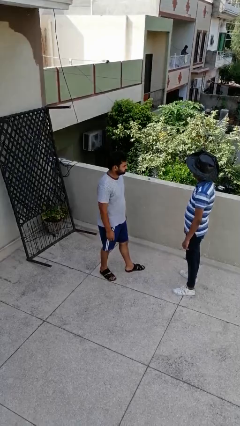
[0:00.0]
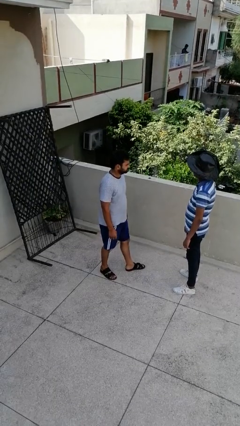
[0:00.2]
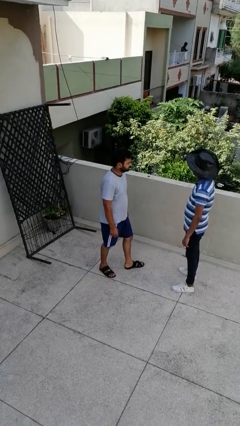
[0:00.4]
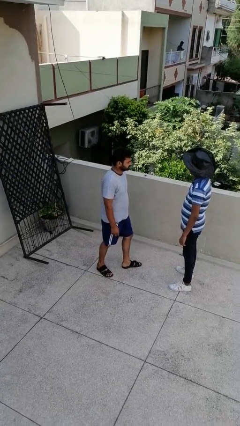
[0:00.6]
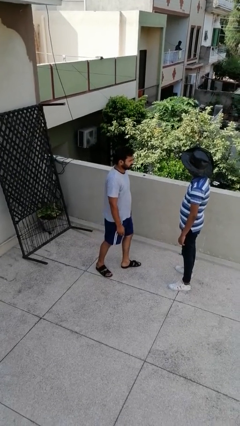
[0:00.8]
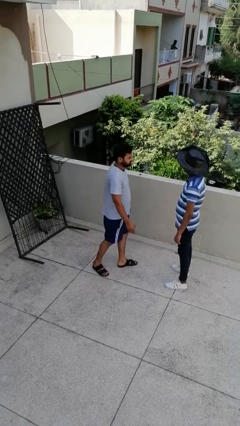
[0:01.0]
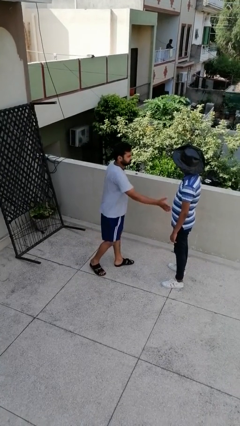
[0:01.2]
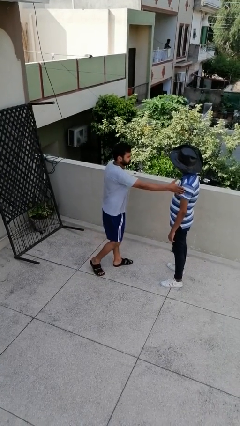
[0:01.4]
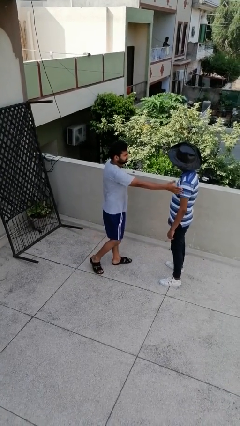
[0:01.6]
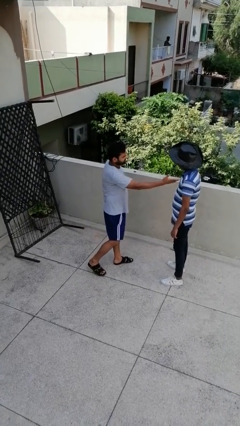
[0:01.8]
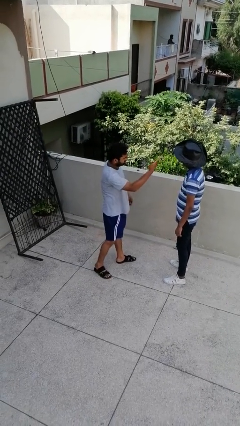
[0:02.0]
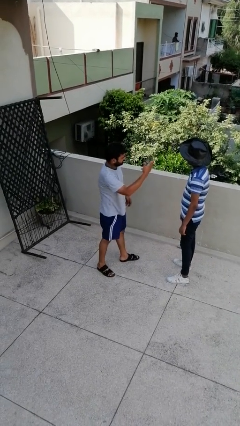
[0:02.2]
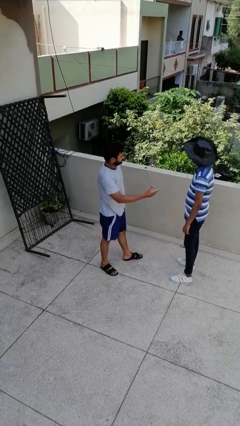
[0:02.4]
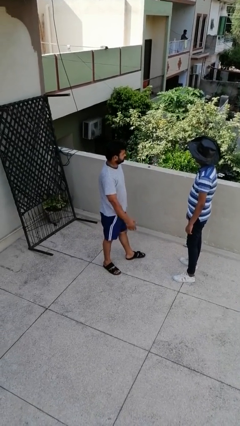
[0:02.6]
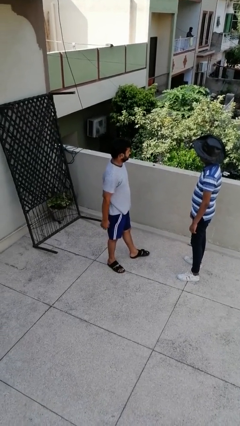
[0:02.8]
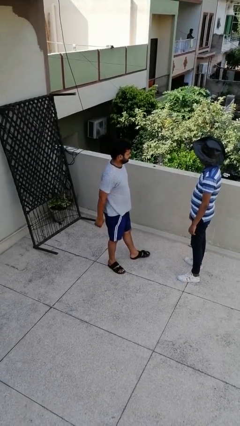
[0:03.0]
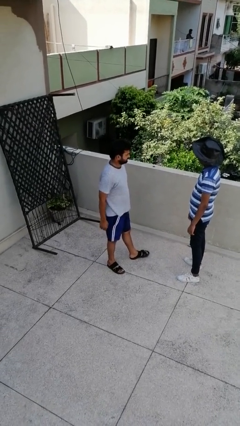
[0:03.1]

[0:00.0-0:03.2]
person shoves person

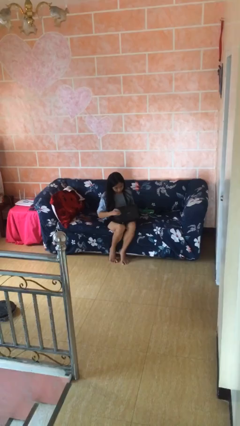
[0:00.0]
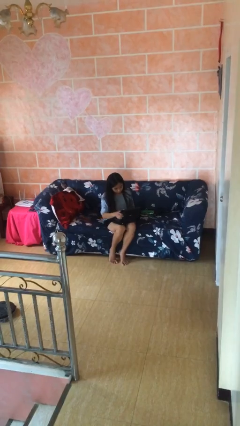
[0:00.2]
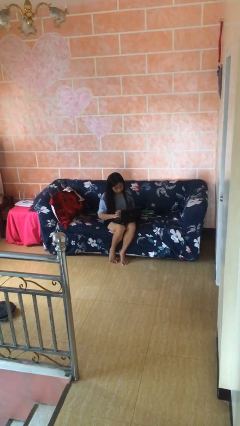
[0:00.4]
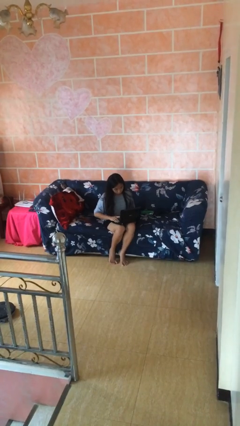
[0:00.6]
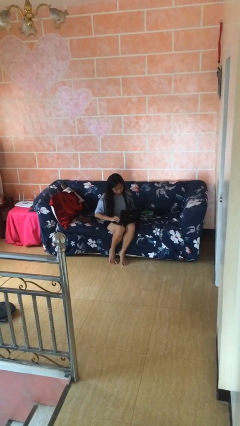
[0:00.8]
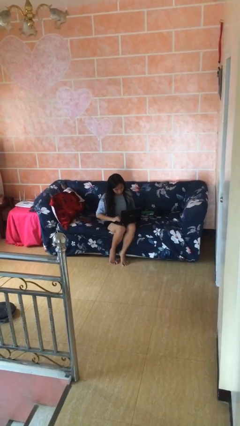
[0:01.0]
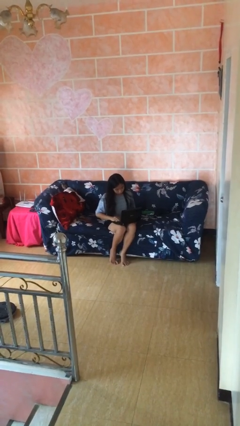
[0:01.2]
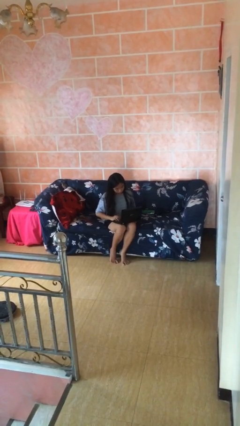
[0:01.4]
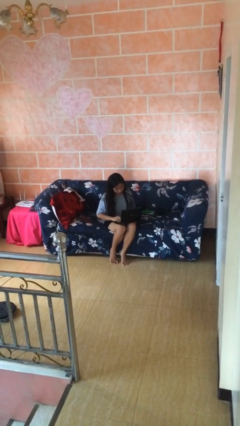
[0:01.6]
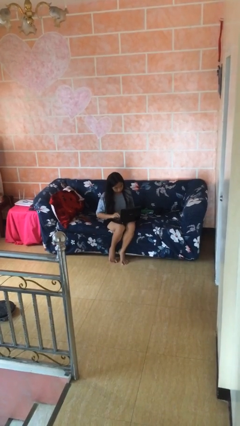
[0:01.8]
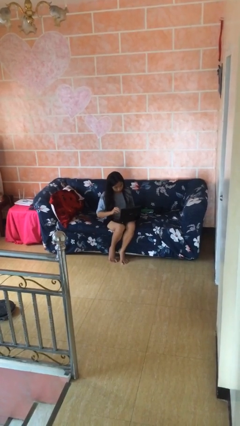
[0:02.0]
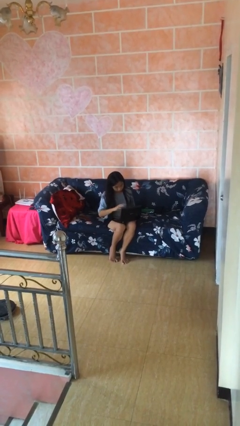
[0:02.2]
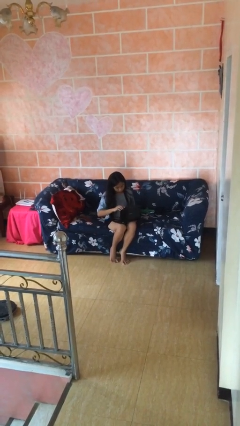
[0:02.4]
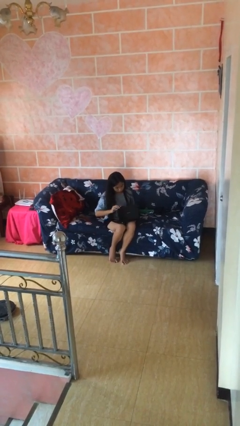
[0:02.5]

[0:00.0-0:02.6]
person interacts with laptop

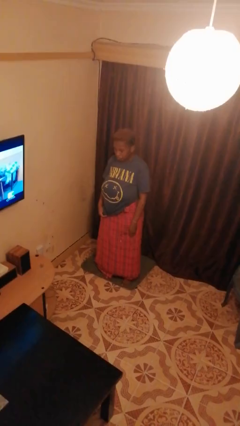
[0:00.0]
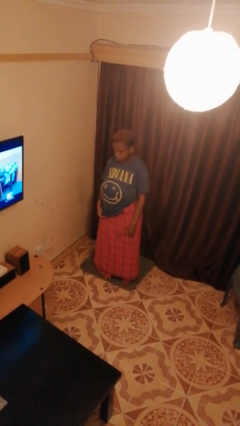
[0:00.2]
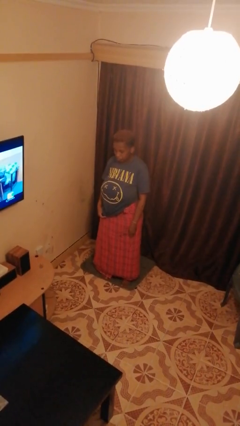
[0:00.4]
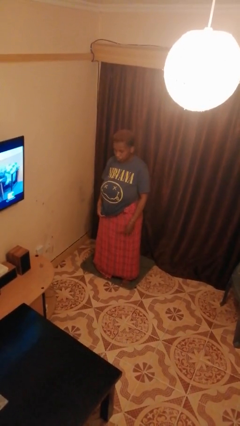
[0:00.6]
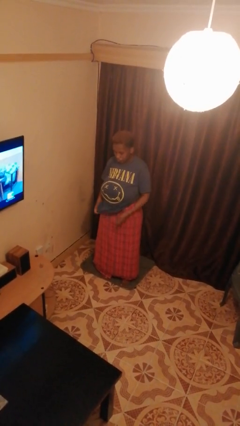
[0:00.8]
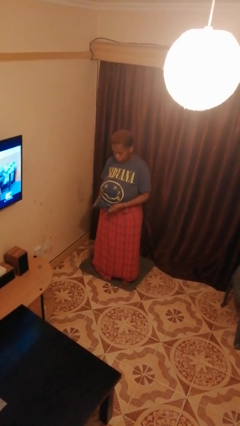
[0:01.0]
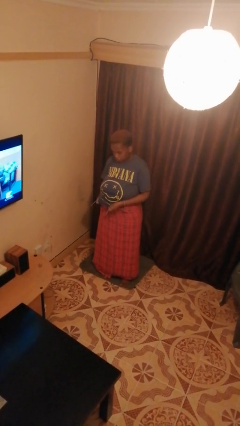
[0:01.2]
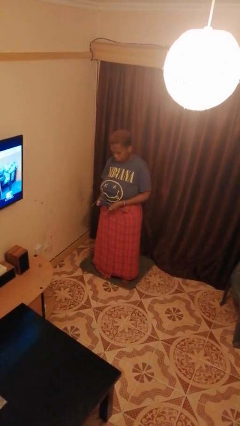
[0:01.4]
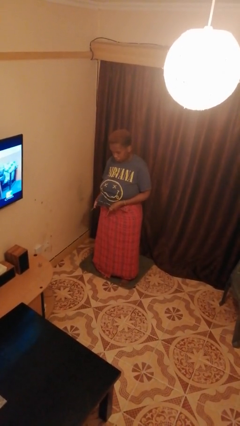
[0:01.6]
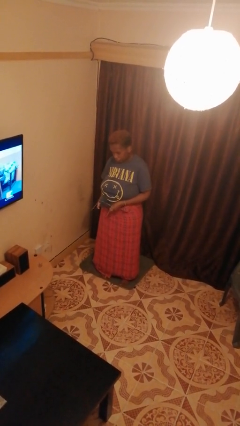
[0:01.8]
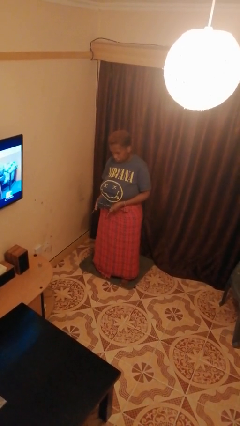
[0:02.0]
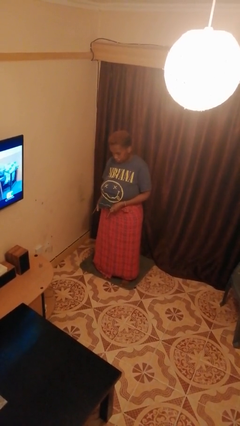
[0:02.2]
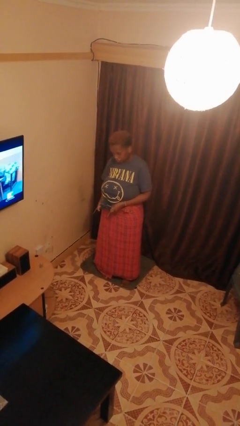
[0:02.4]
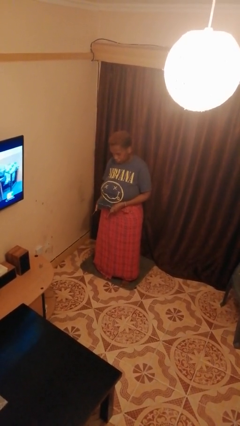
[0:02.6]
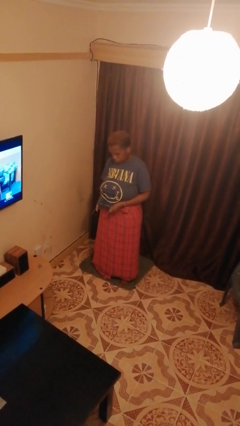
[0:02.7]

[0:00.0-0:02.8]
person cleans eyeglasses

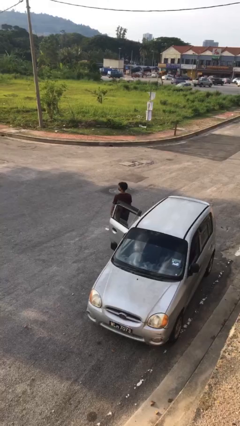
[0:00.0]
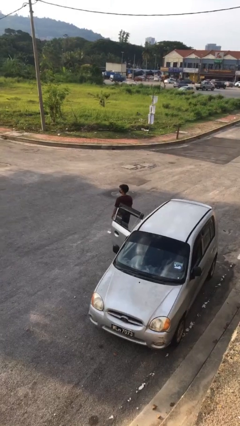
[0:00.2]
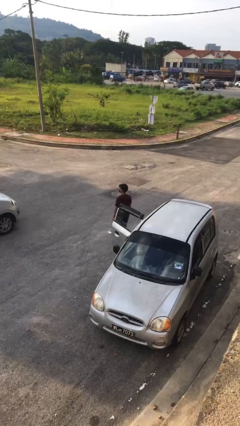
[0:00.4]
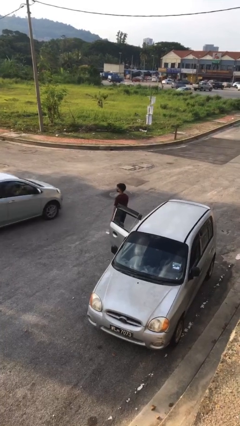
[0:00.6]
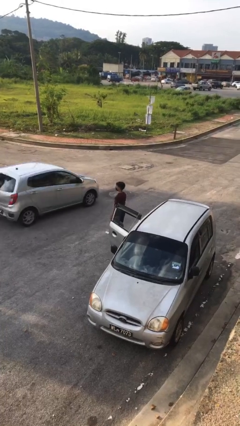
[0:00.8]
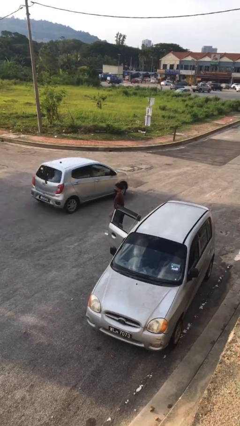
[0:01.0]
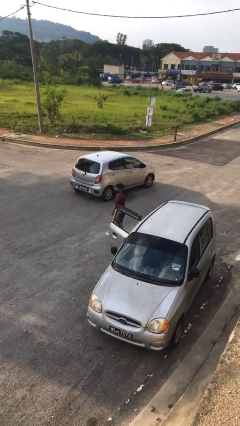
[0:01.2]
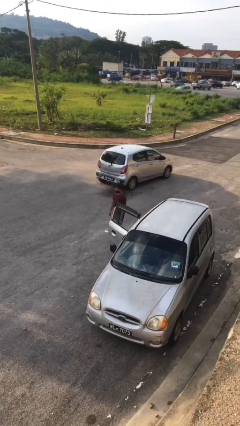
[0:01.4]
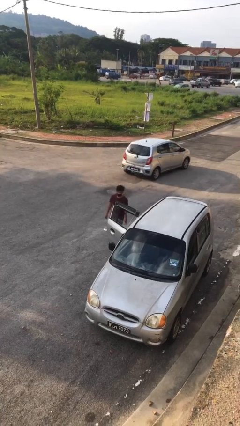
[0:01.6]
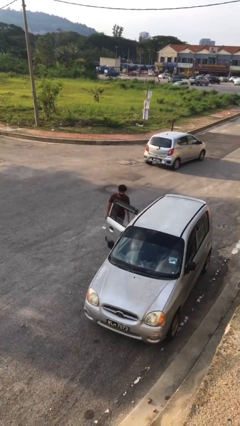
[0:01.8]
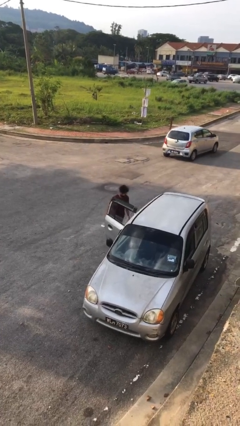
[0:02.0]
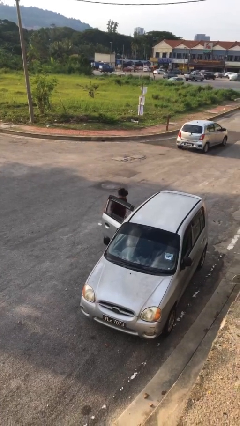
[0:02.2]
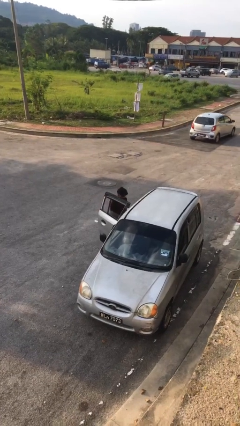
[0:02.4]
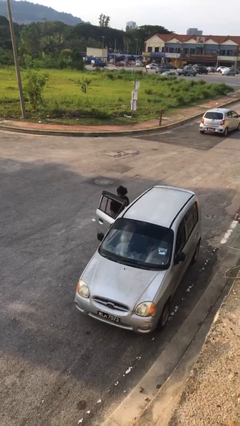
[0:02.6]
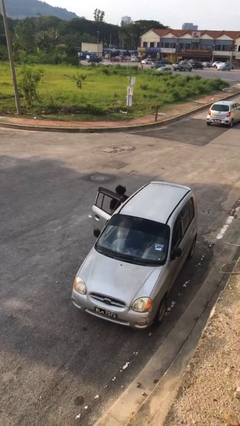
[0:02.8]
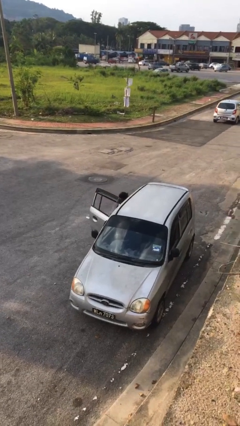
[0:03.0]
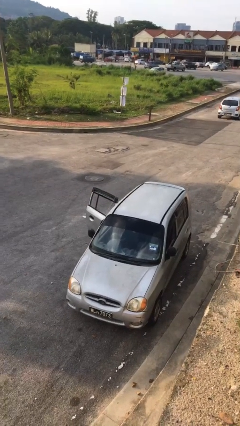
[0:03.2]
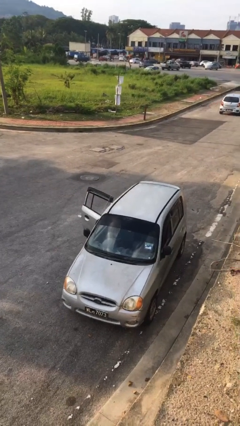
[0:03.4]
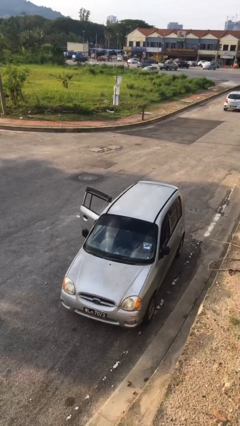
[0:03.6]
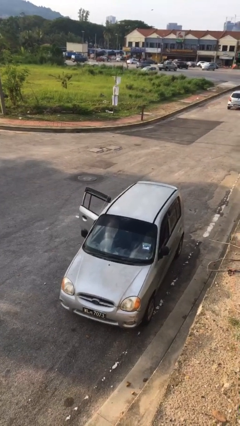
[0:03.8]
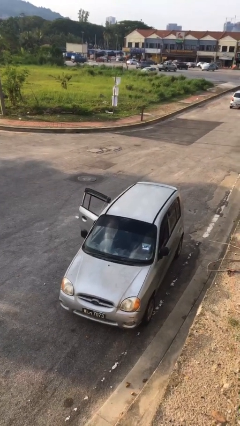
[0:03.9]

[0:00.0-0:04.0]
person enters car

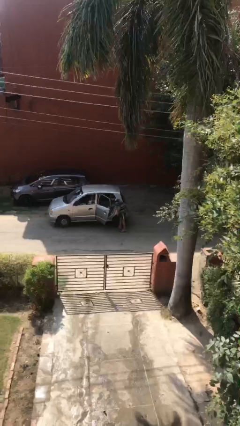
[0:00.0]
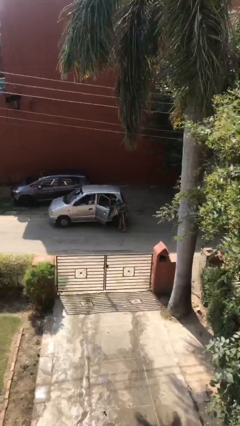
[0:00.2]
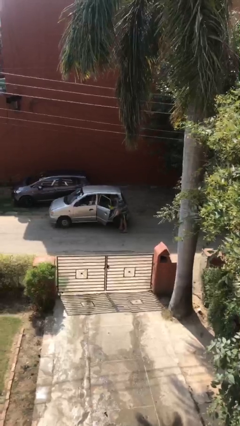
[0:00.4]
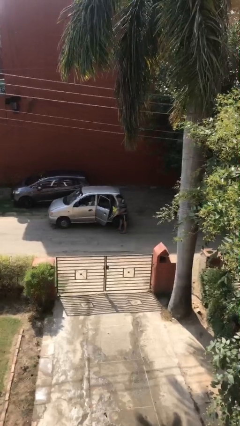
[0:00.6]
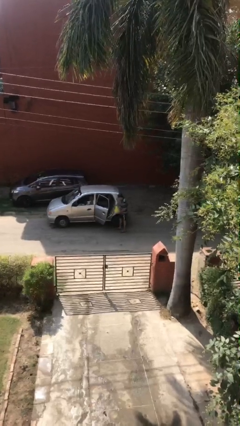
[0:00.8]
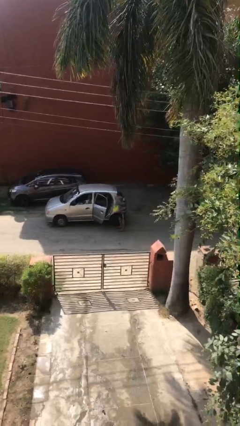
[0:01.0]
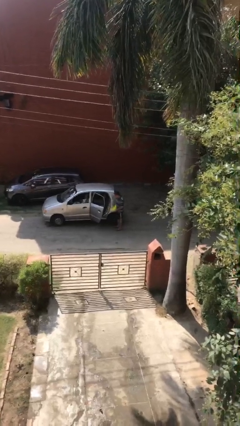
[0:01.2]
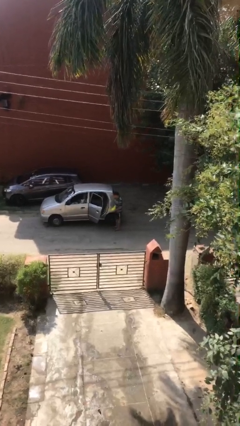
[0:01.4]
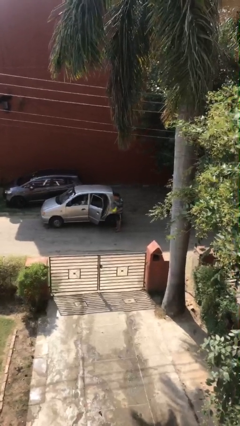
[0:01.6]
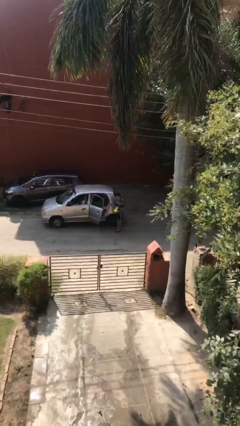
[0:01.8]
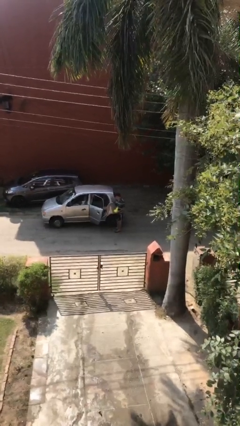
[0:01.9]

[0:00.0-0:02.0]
person unloads car

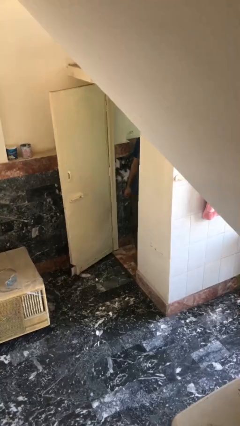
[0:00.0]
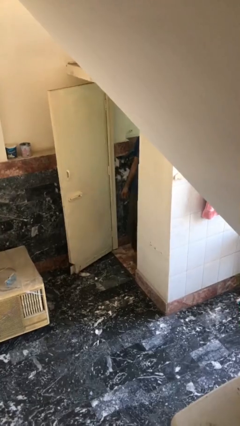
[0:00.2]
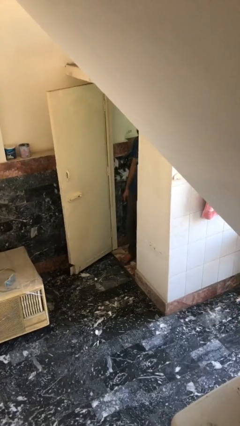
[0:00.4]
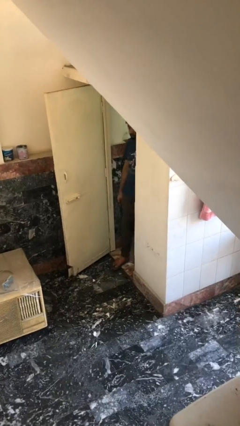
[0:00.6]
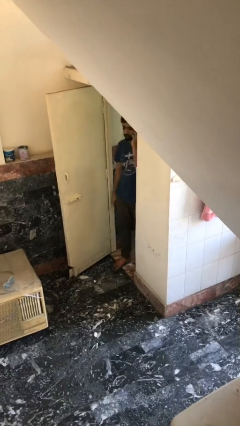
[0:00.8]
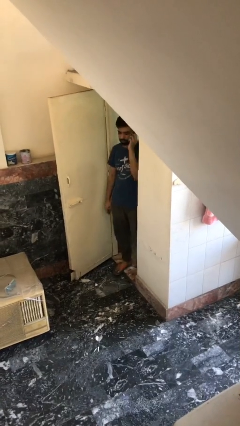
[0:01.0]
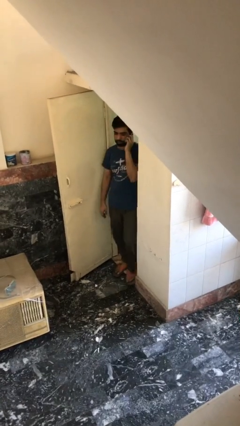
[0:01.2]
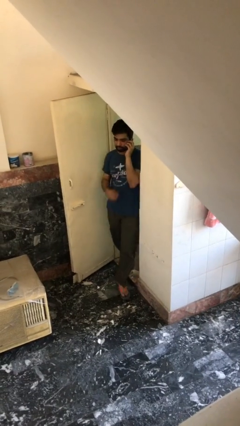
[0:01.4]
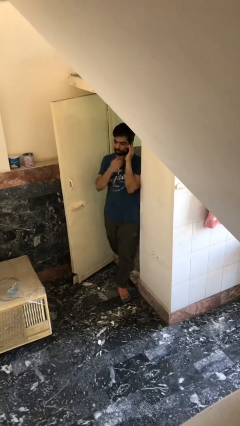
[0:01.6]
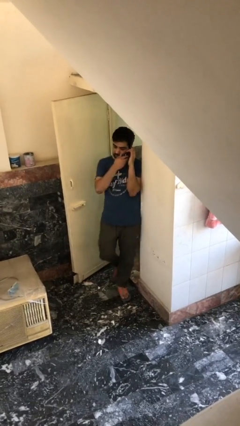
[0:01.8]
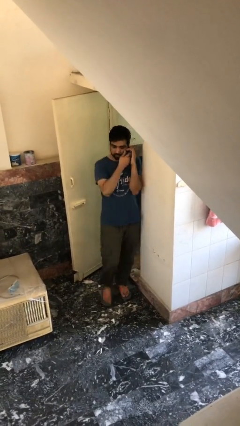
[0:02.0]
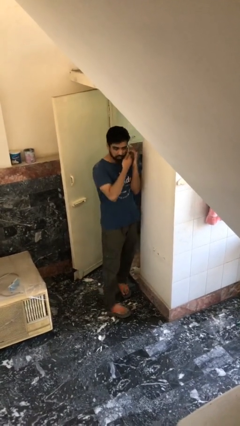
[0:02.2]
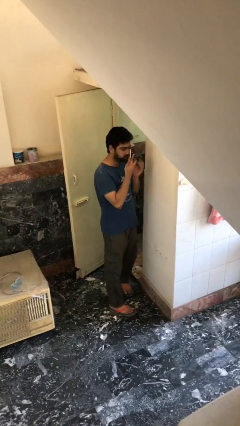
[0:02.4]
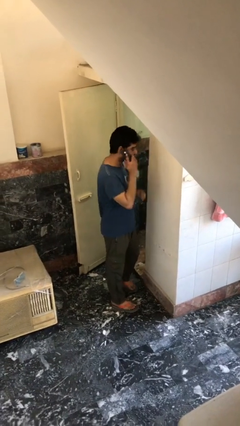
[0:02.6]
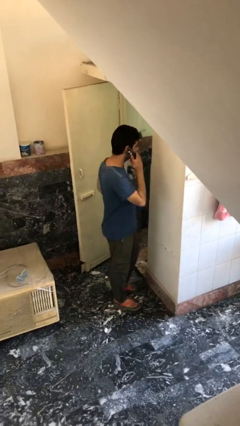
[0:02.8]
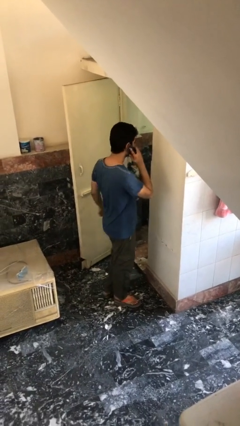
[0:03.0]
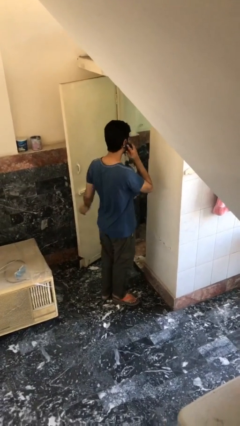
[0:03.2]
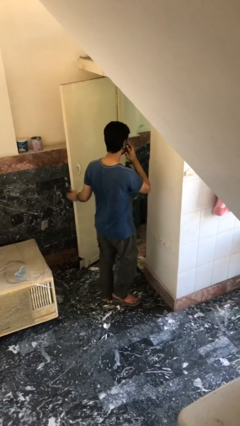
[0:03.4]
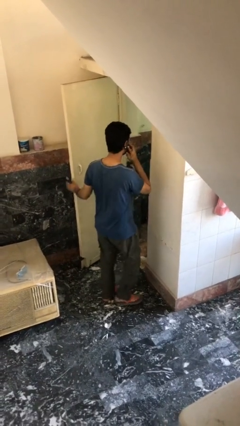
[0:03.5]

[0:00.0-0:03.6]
person enters scene through structure
